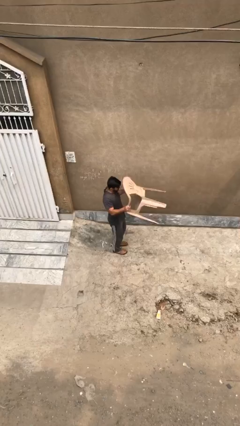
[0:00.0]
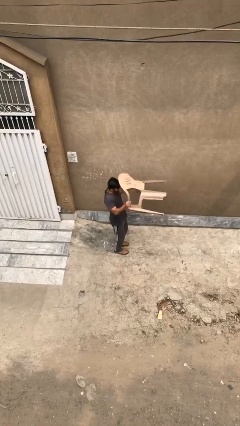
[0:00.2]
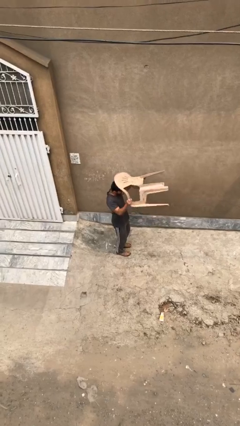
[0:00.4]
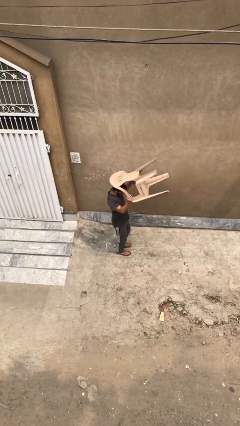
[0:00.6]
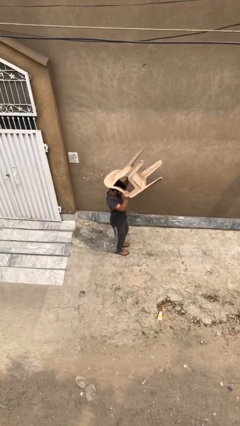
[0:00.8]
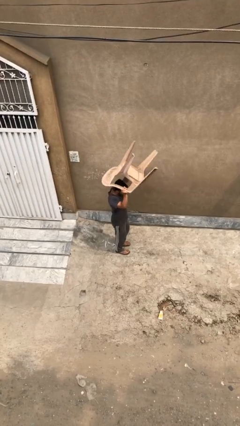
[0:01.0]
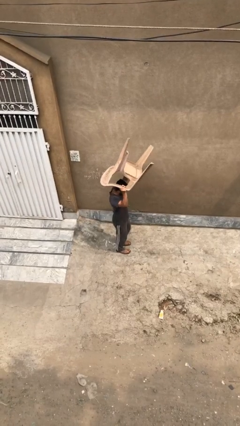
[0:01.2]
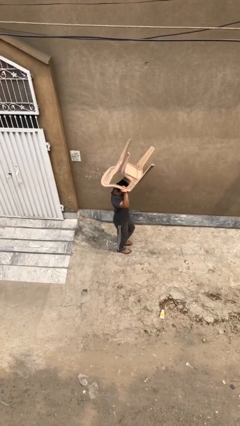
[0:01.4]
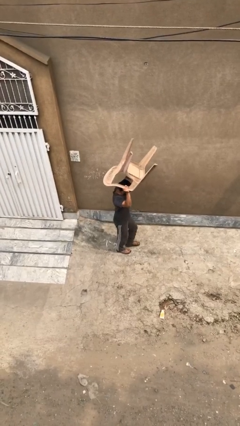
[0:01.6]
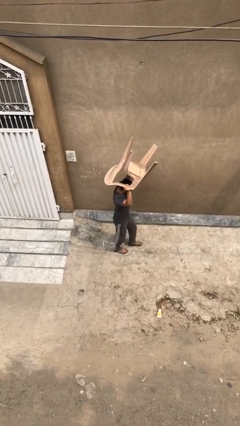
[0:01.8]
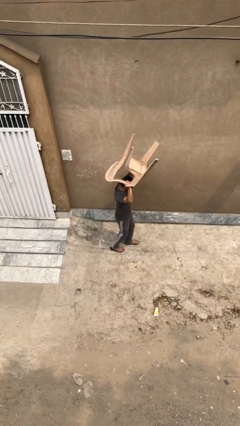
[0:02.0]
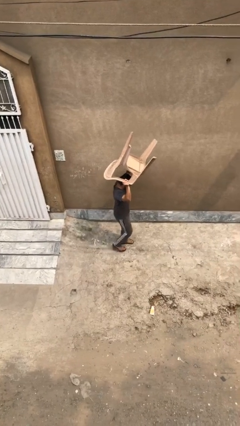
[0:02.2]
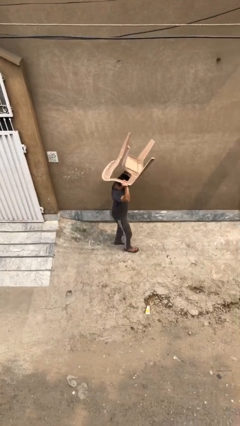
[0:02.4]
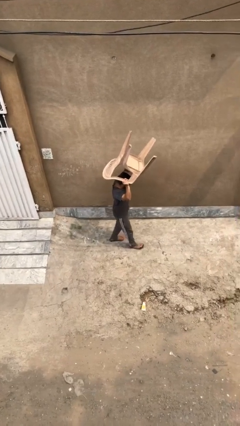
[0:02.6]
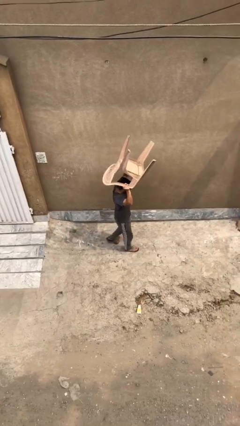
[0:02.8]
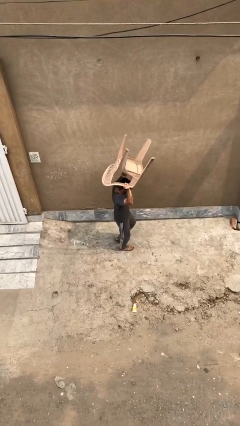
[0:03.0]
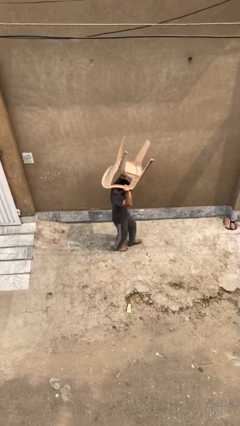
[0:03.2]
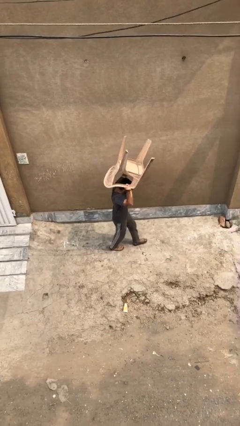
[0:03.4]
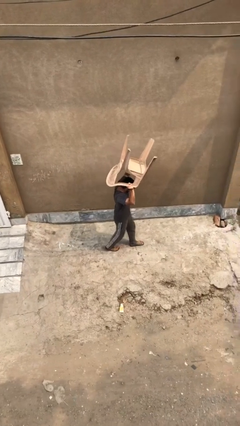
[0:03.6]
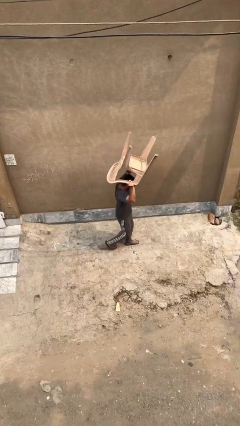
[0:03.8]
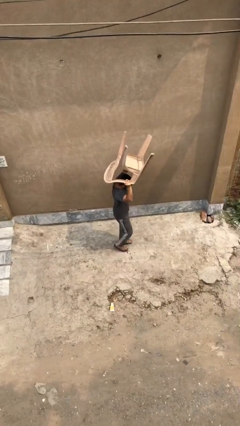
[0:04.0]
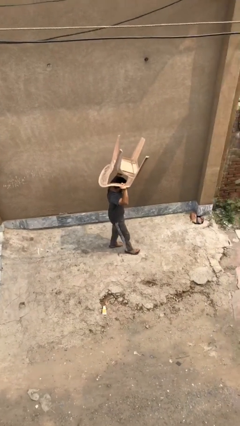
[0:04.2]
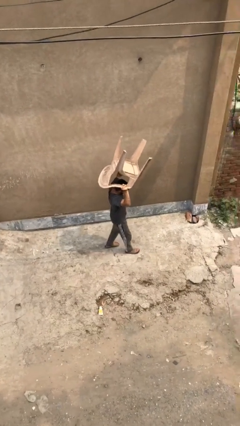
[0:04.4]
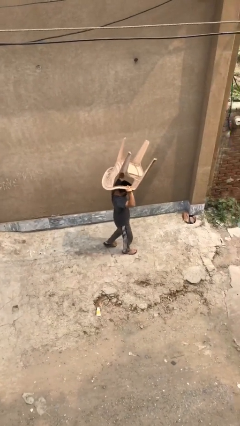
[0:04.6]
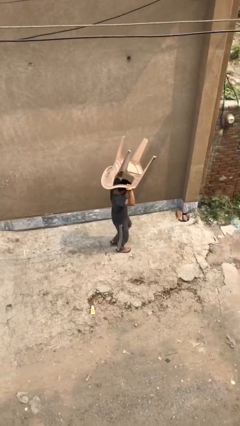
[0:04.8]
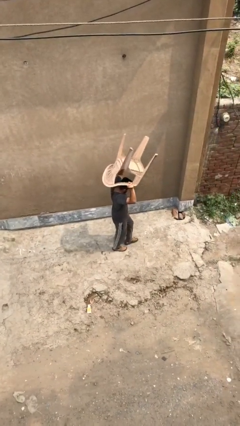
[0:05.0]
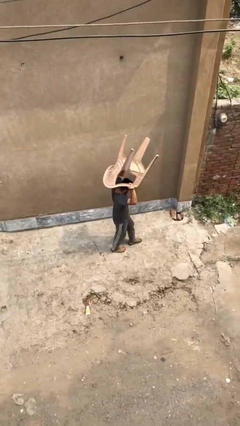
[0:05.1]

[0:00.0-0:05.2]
person carries heavy object

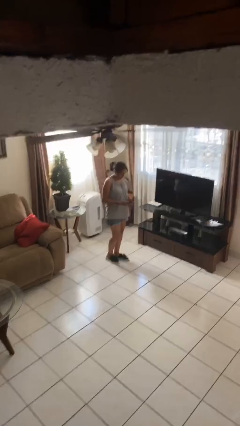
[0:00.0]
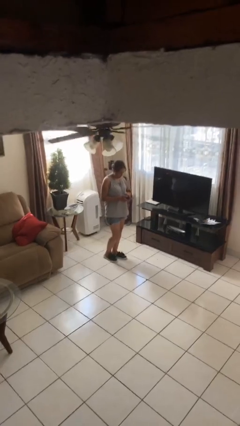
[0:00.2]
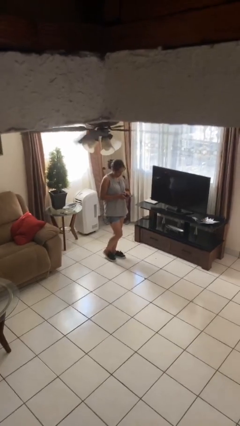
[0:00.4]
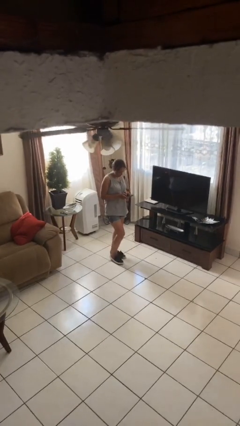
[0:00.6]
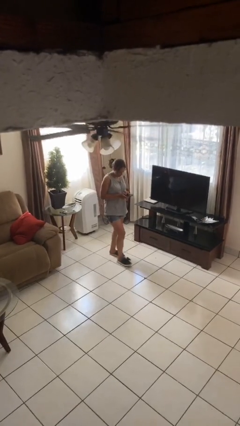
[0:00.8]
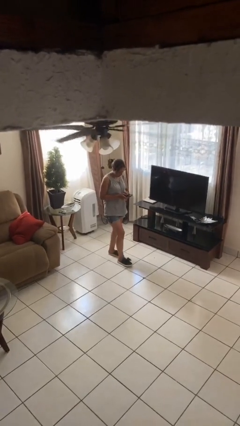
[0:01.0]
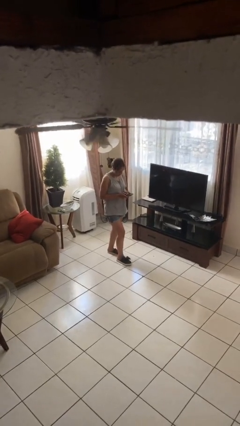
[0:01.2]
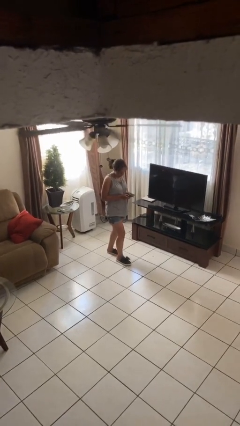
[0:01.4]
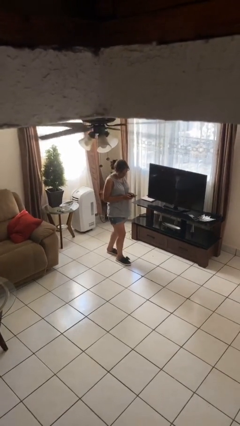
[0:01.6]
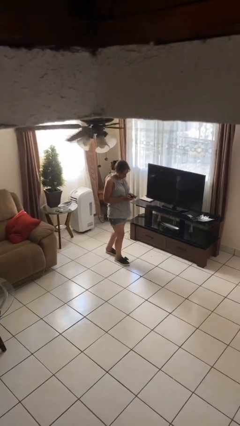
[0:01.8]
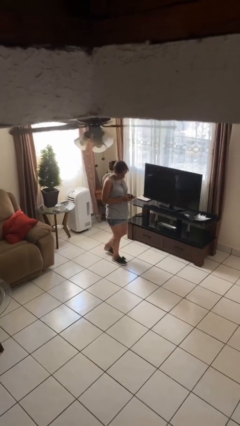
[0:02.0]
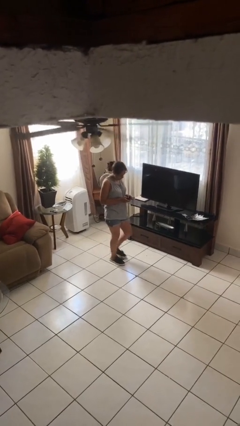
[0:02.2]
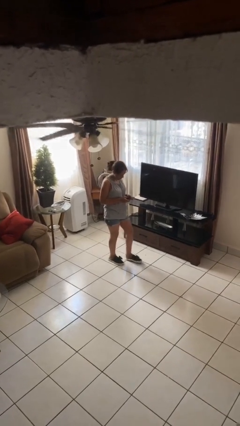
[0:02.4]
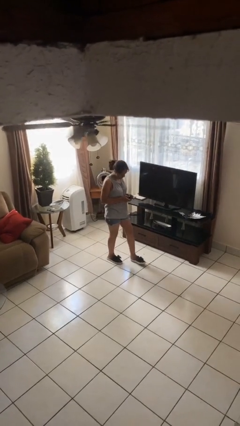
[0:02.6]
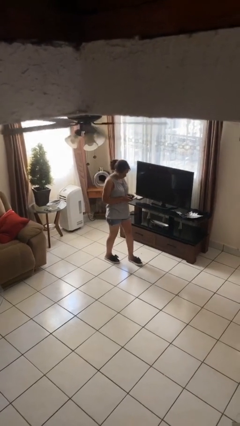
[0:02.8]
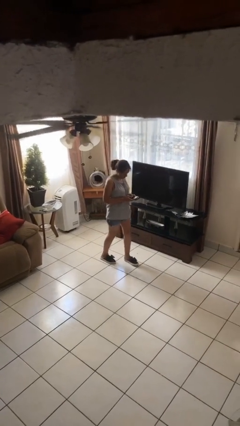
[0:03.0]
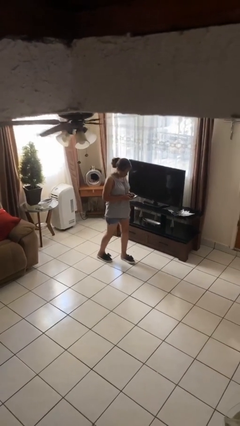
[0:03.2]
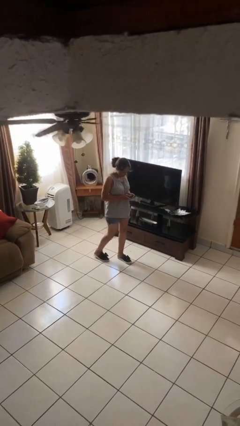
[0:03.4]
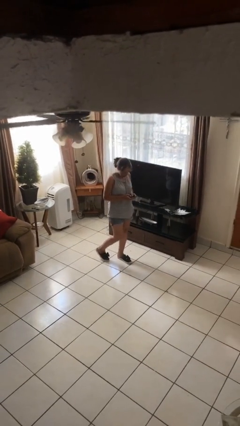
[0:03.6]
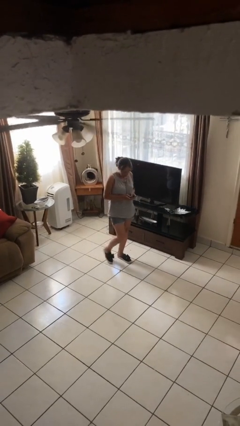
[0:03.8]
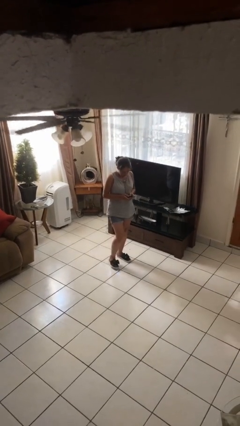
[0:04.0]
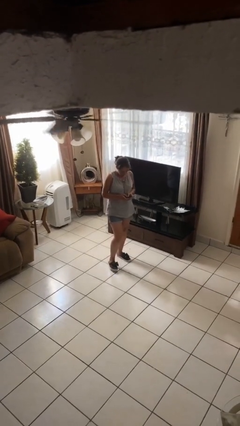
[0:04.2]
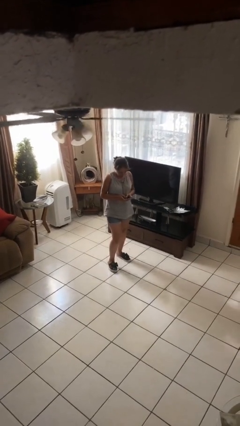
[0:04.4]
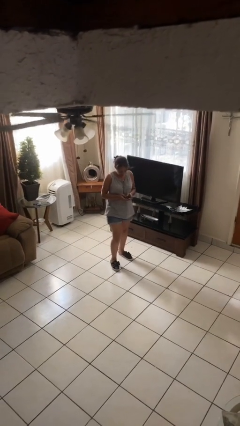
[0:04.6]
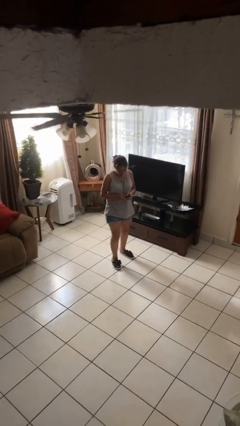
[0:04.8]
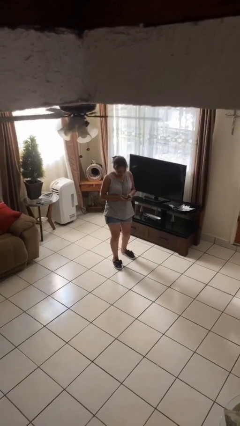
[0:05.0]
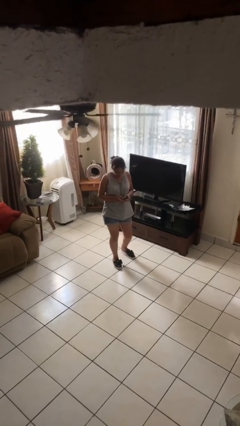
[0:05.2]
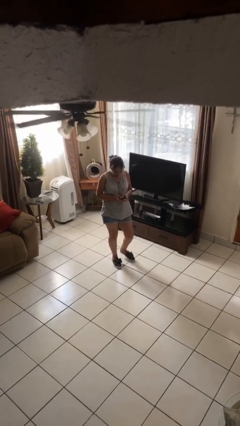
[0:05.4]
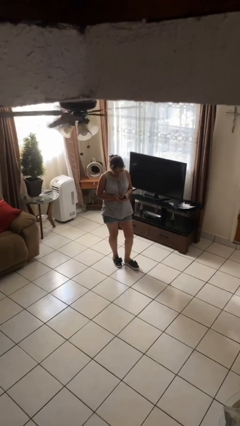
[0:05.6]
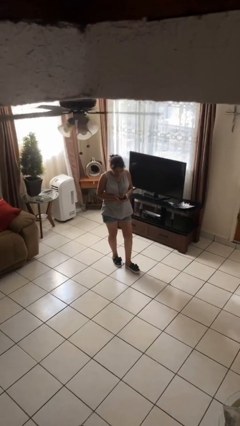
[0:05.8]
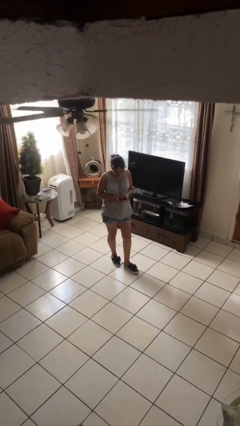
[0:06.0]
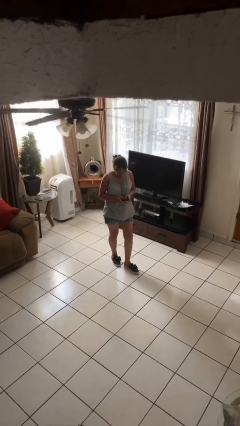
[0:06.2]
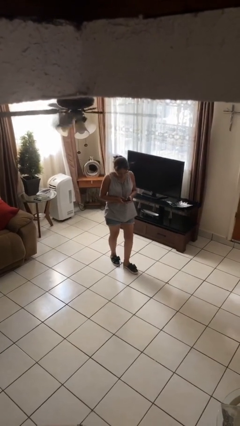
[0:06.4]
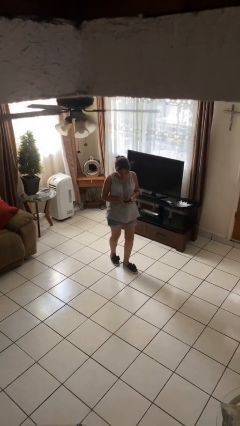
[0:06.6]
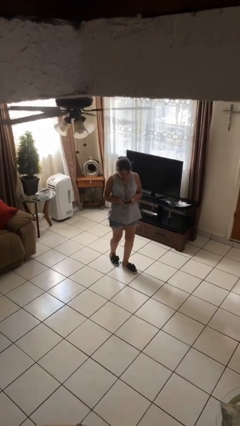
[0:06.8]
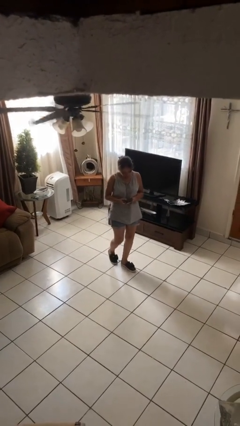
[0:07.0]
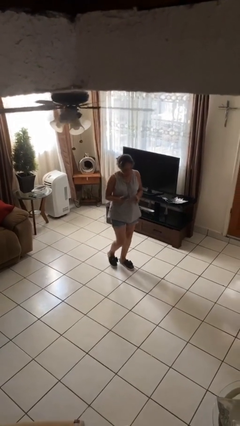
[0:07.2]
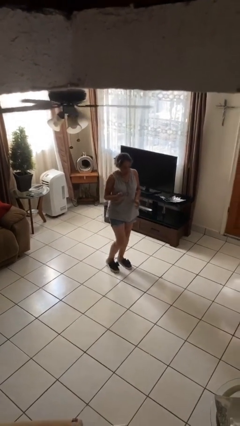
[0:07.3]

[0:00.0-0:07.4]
person texts on phone

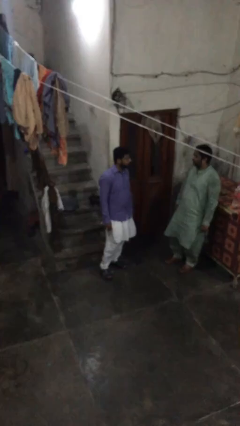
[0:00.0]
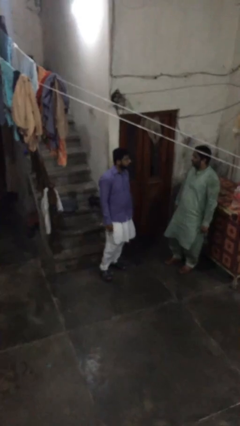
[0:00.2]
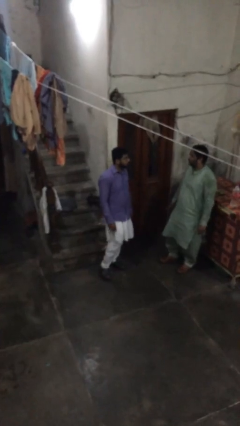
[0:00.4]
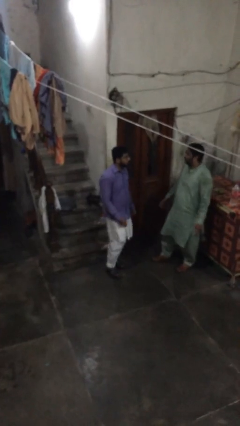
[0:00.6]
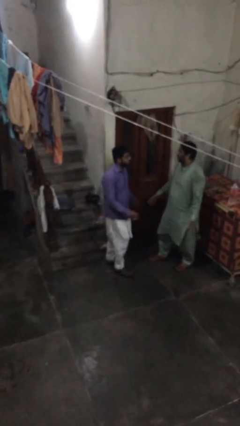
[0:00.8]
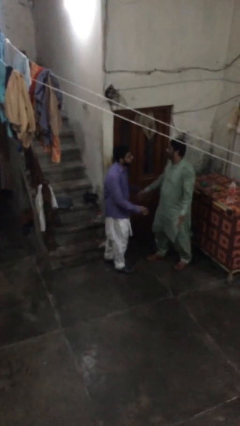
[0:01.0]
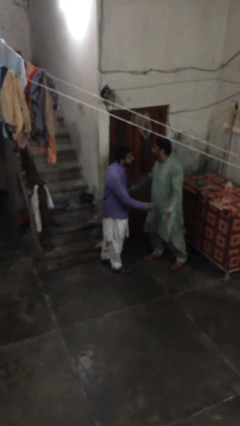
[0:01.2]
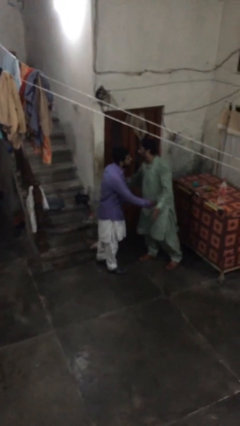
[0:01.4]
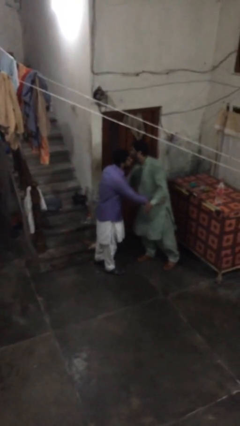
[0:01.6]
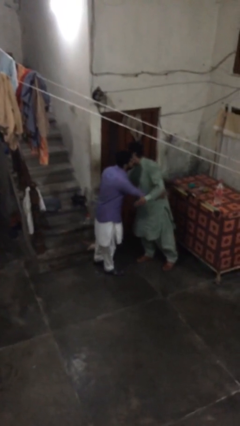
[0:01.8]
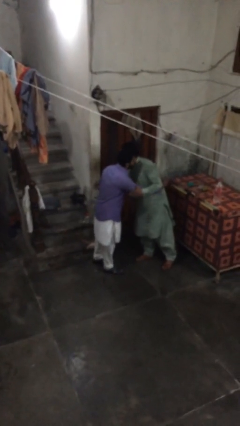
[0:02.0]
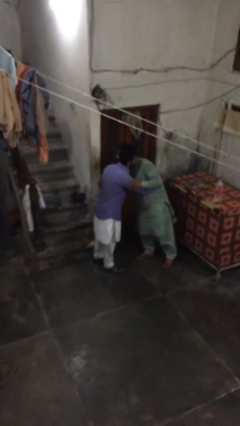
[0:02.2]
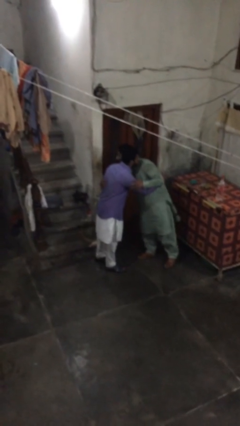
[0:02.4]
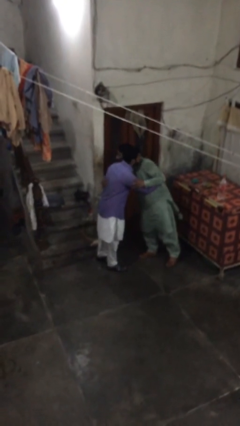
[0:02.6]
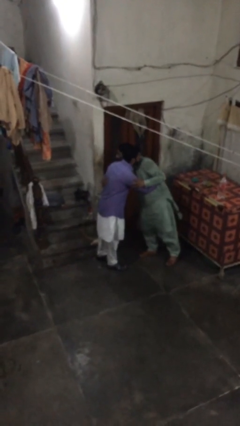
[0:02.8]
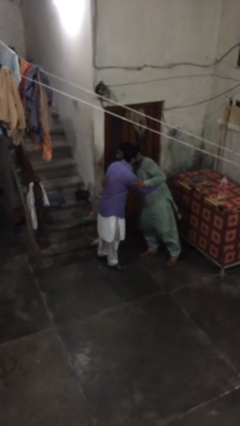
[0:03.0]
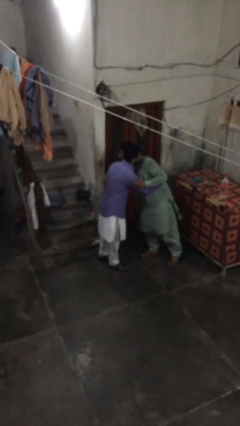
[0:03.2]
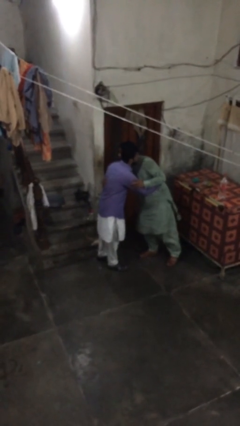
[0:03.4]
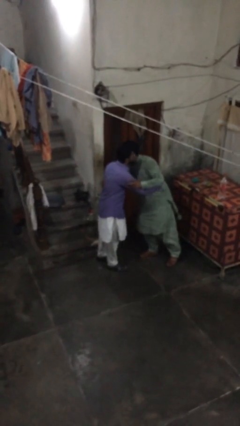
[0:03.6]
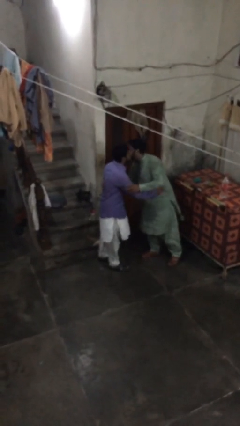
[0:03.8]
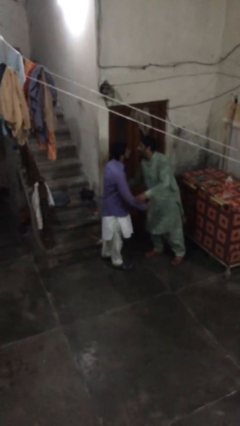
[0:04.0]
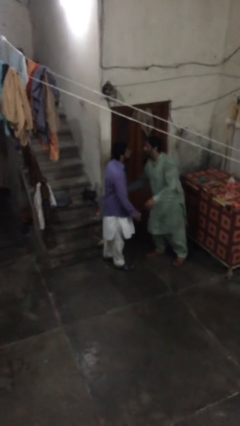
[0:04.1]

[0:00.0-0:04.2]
person embraces person

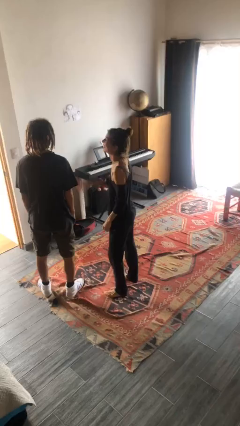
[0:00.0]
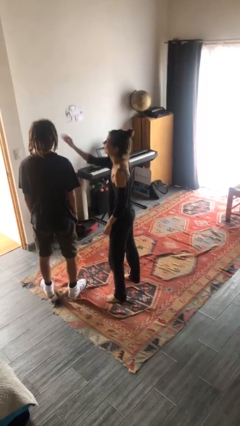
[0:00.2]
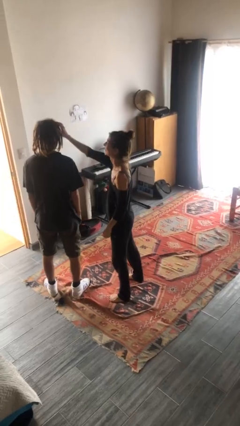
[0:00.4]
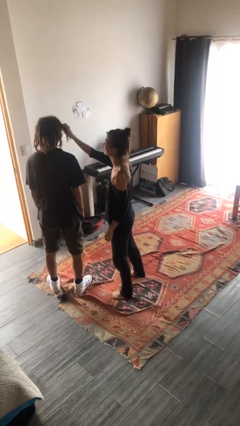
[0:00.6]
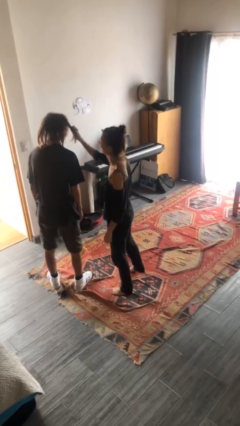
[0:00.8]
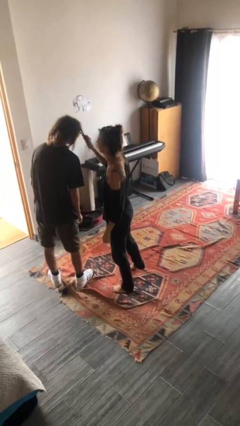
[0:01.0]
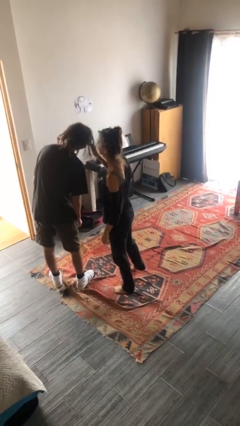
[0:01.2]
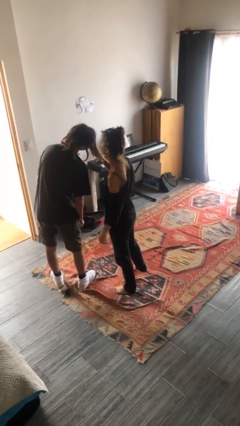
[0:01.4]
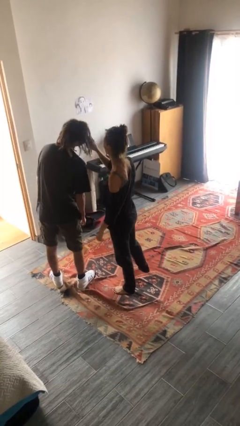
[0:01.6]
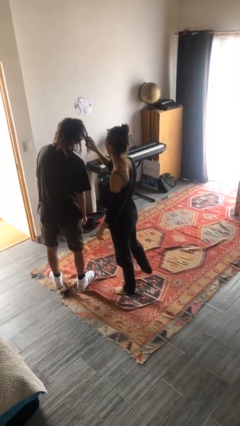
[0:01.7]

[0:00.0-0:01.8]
person grabs person by hair
